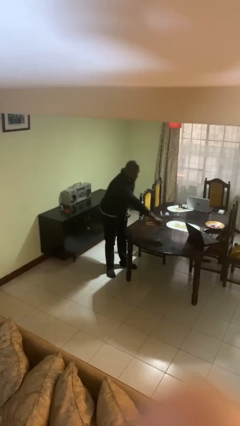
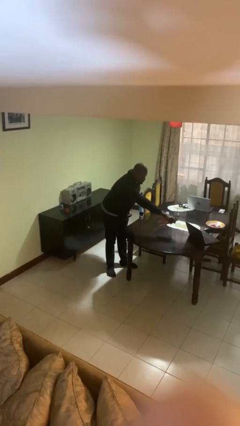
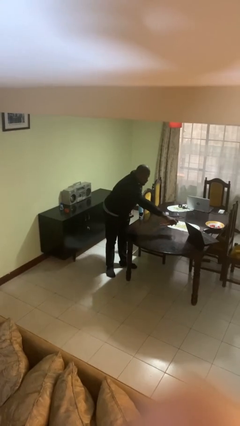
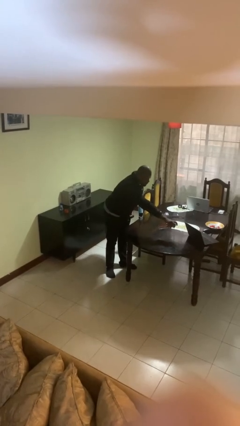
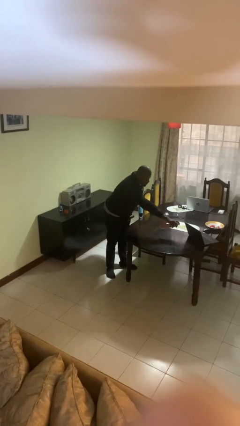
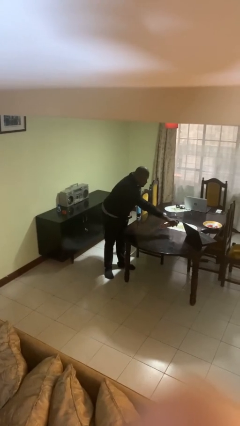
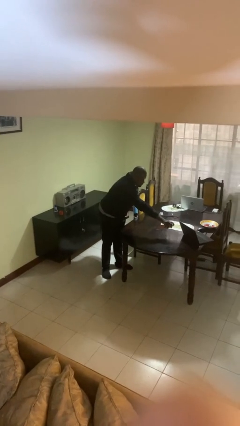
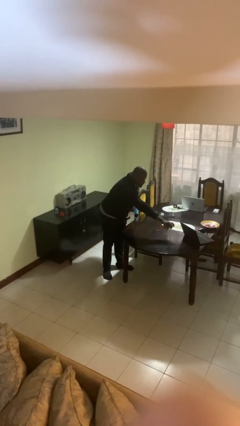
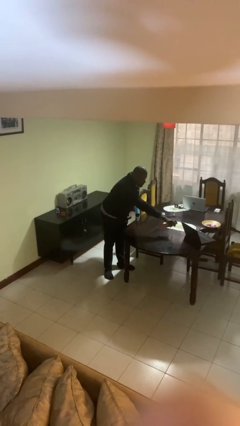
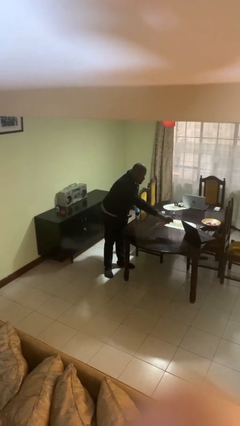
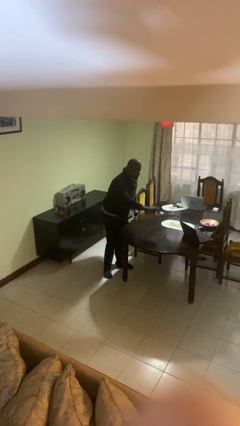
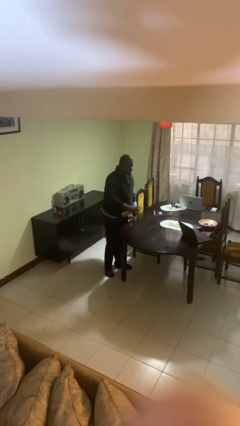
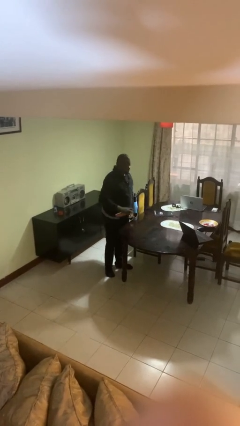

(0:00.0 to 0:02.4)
person sprays from bottle

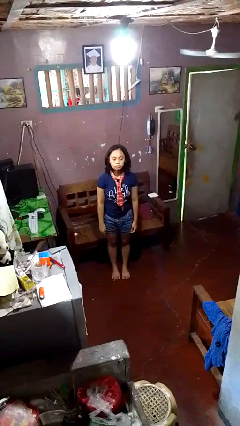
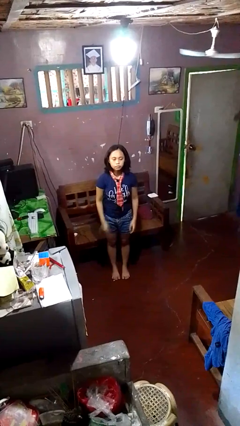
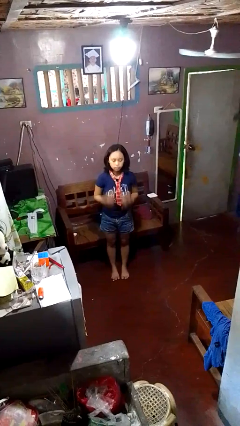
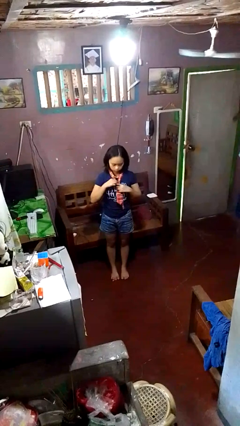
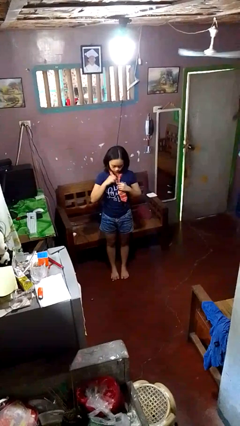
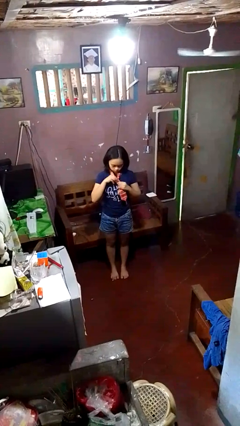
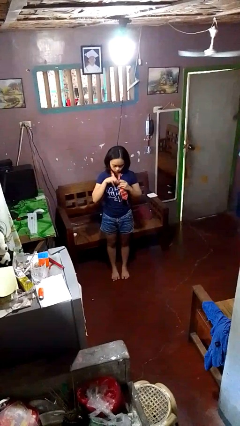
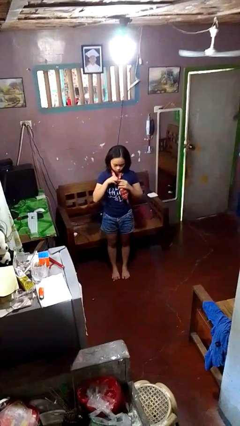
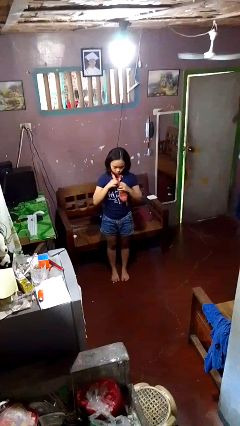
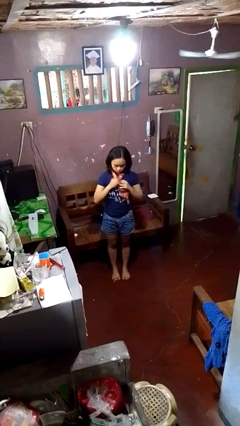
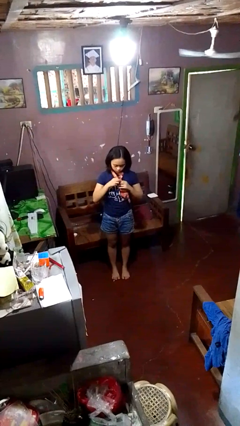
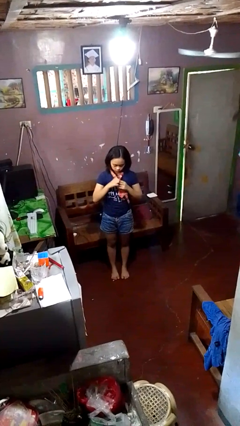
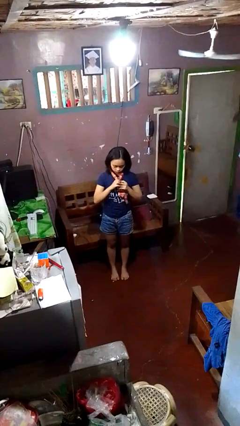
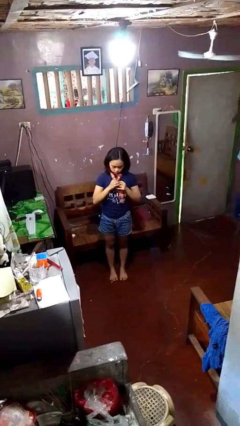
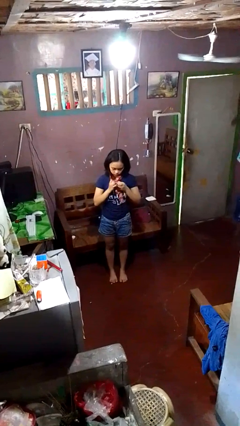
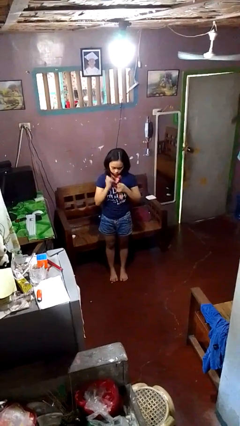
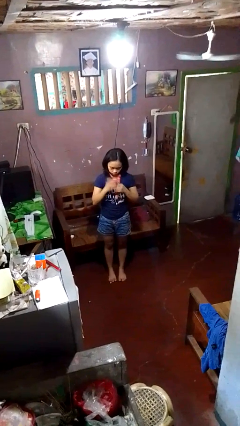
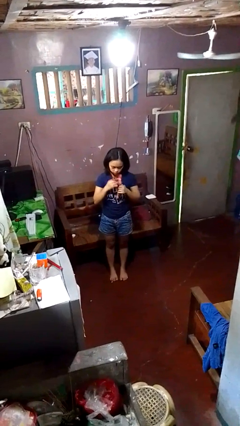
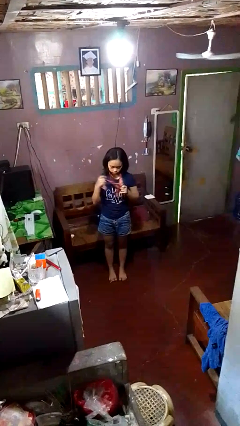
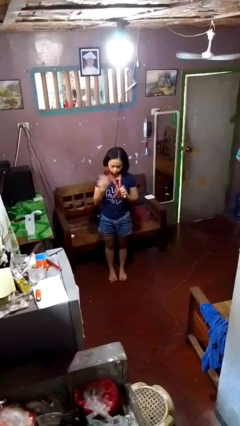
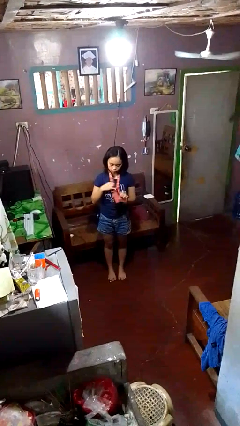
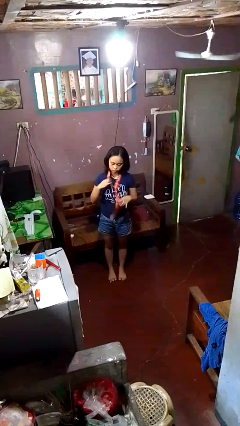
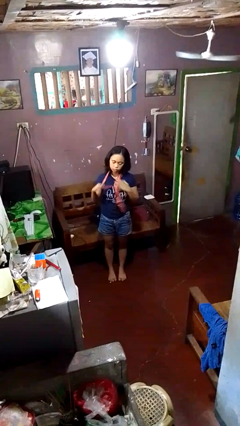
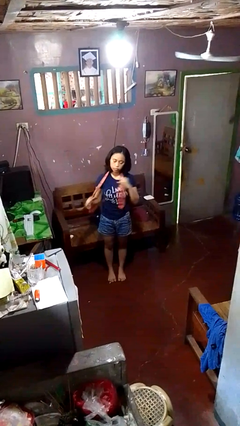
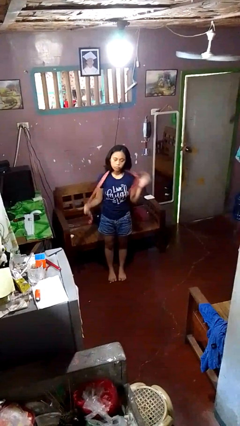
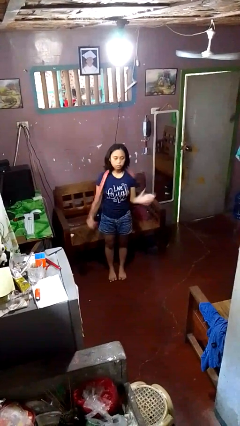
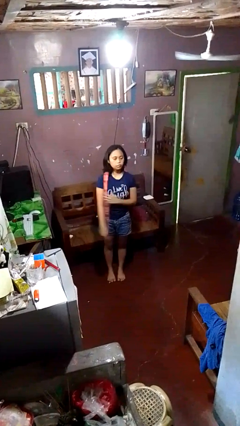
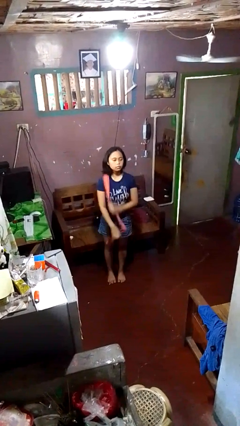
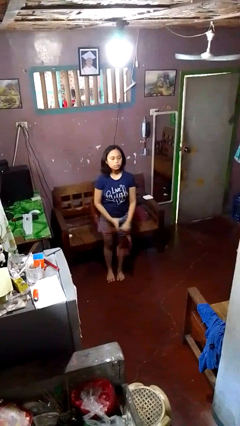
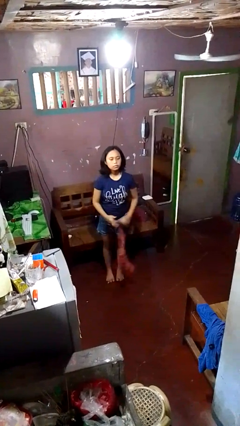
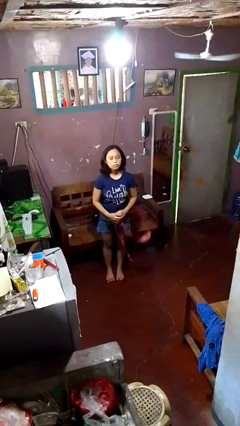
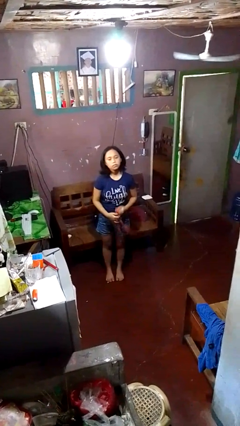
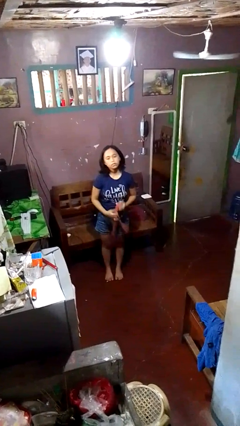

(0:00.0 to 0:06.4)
person takes off necktie

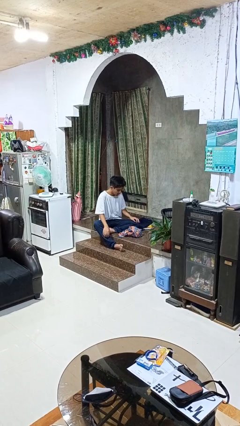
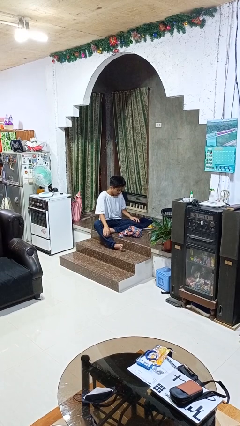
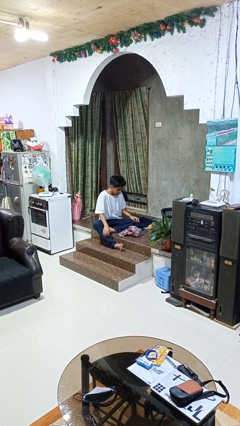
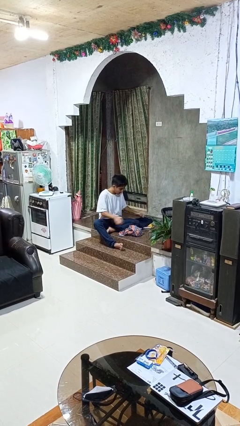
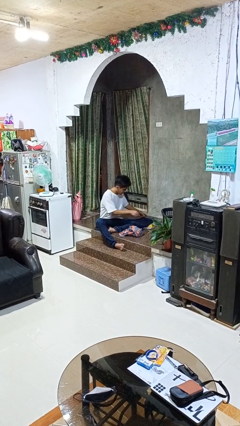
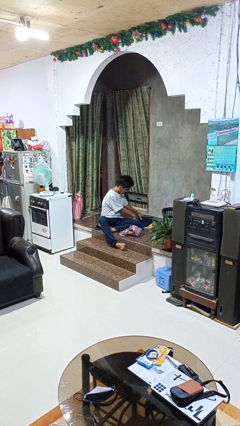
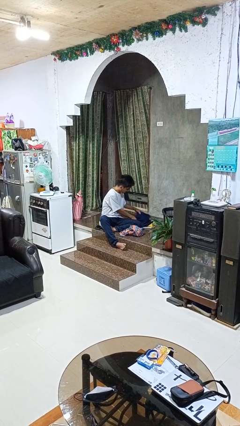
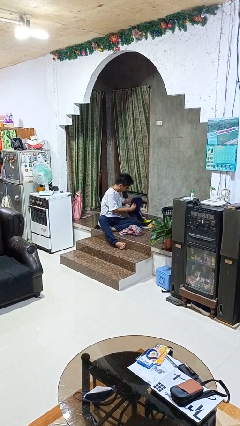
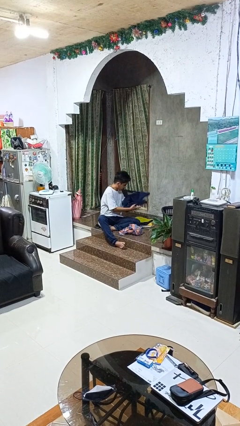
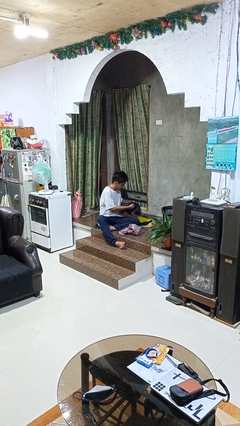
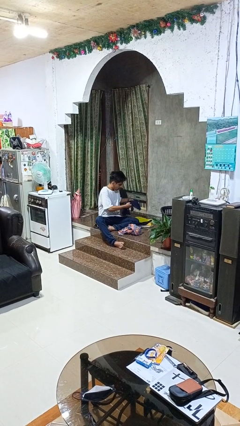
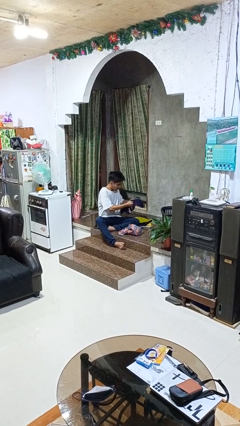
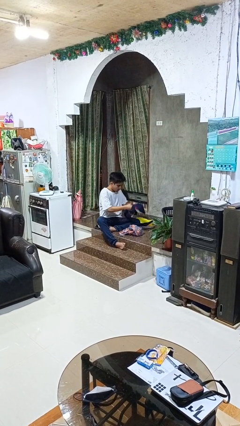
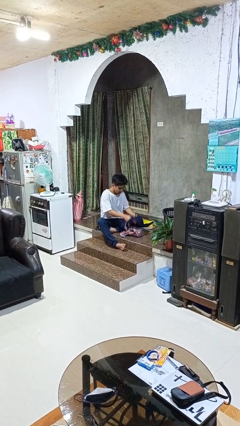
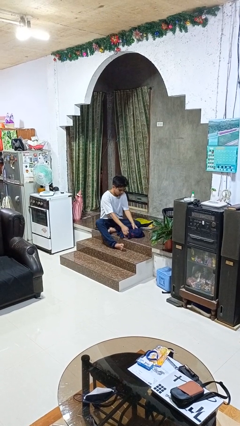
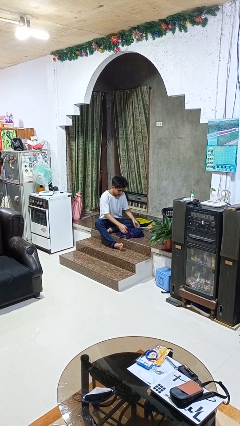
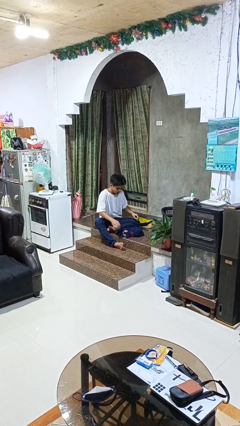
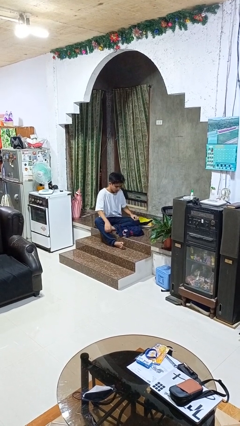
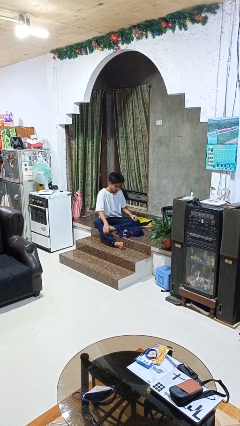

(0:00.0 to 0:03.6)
person folds shirt

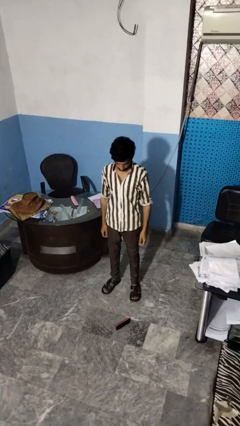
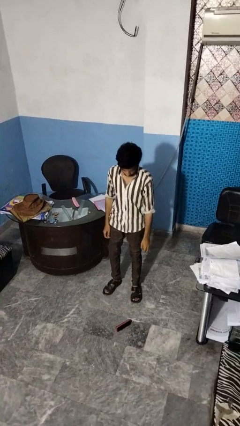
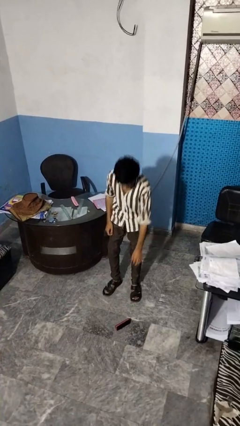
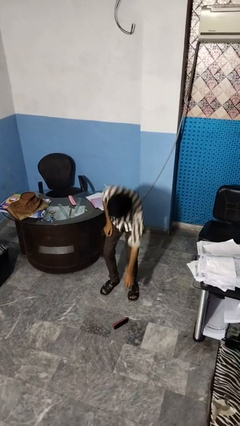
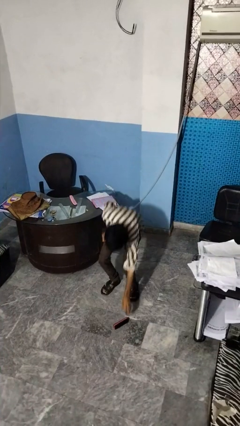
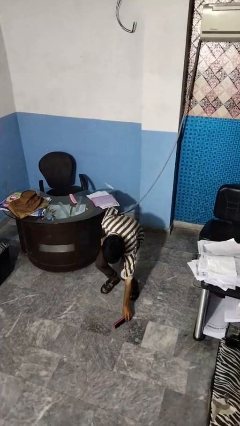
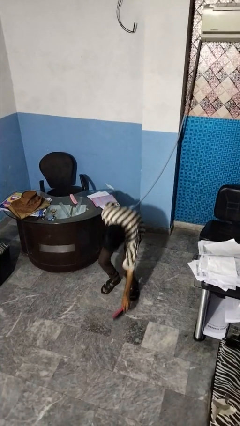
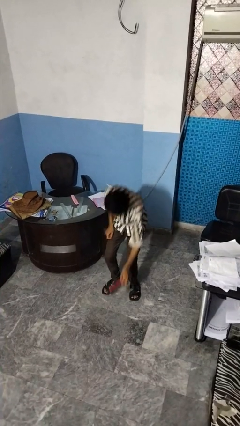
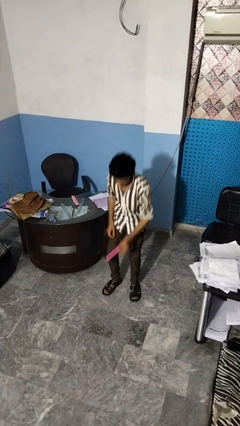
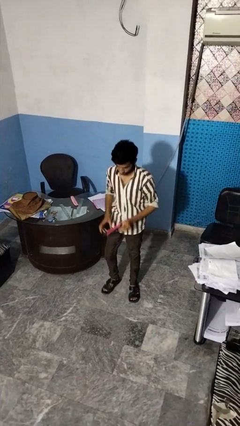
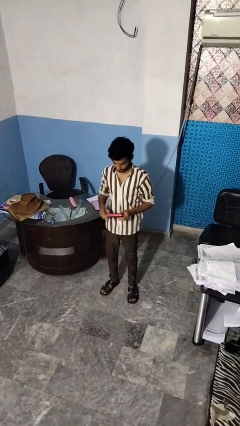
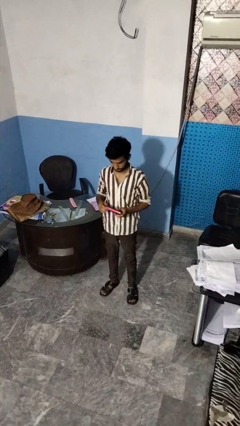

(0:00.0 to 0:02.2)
person picks up object from floor

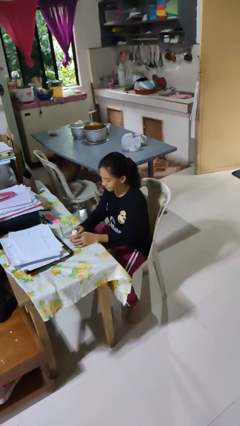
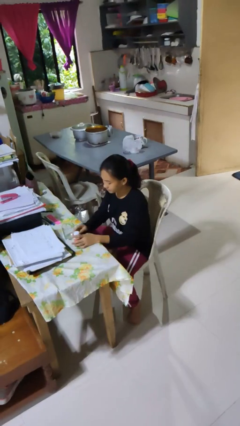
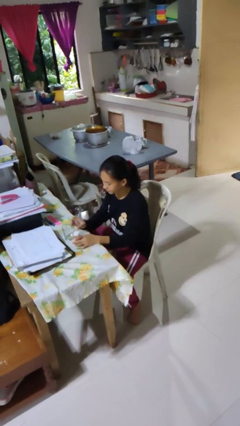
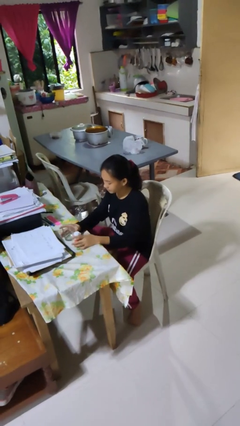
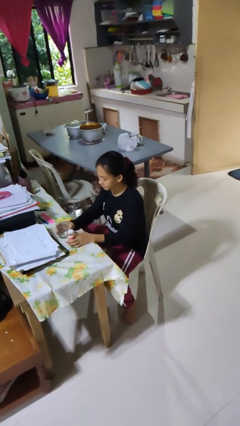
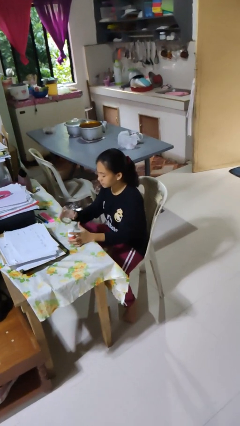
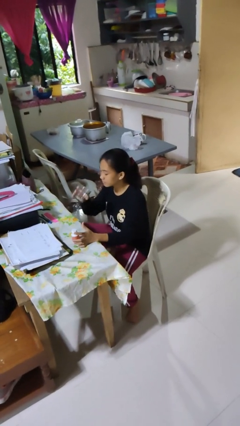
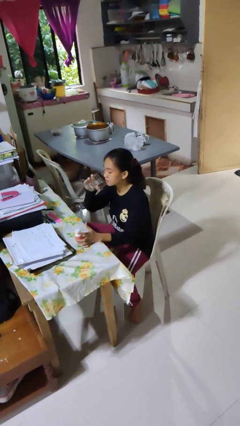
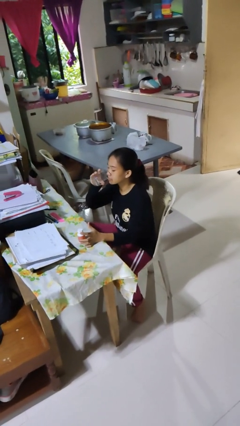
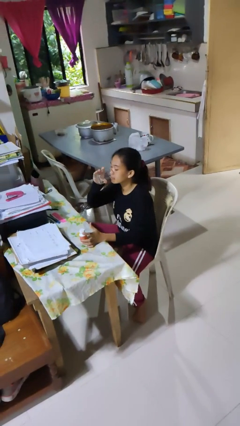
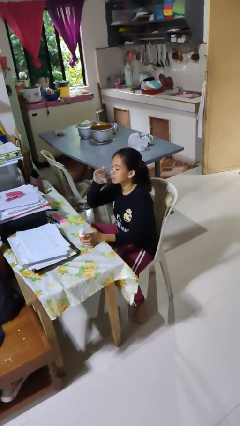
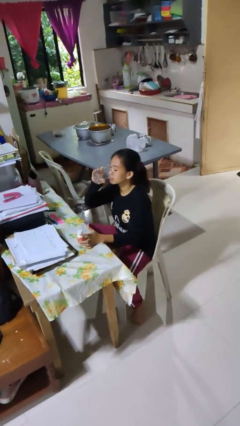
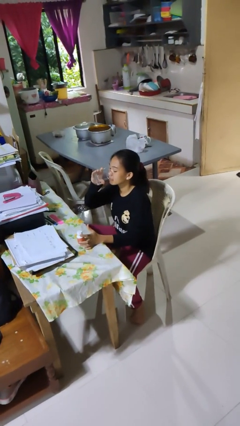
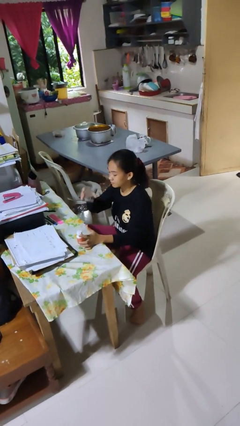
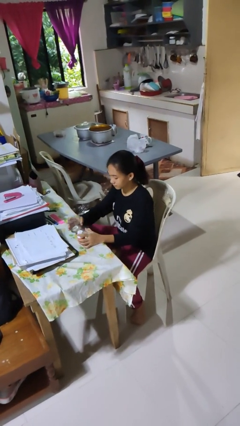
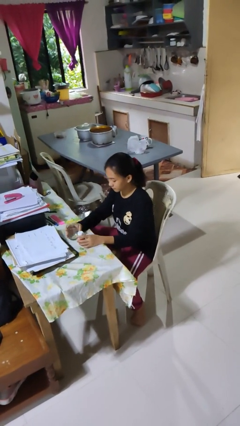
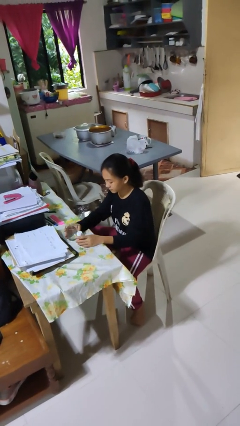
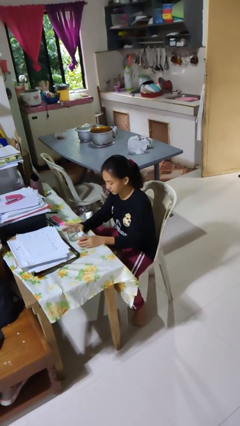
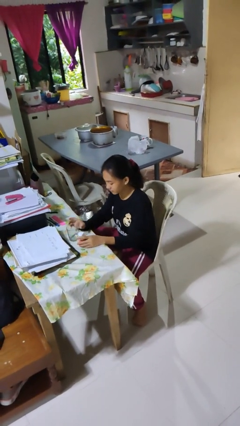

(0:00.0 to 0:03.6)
person drinks from cup
